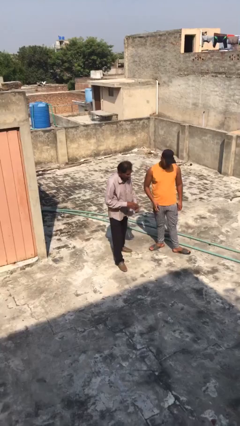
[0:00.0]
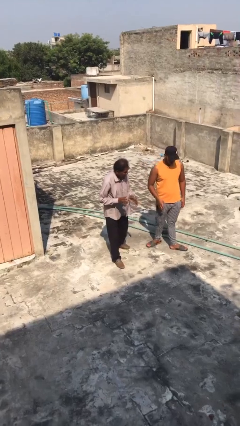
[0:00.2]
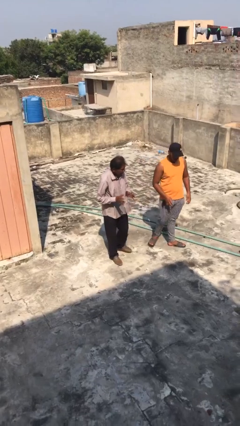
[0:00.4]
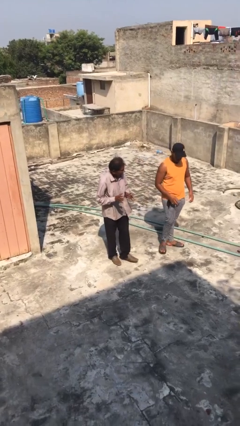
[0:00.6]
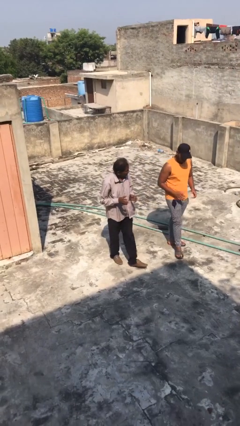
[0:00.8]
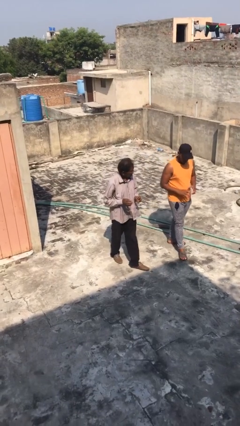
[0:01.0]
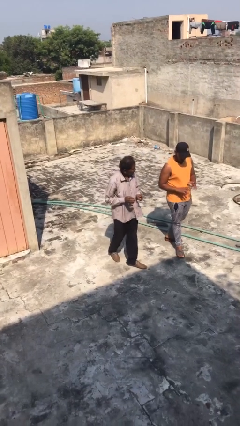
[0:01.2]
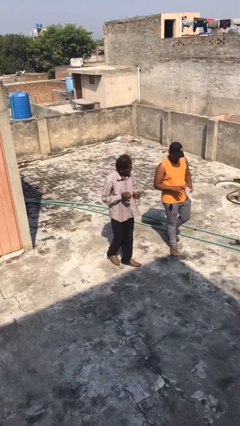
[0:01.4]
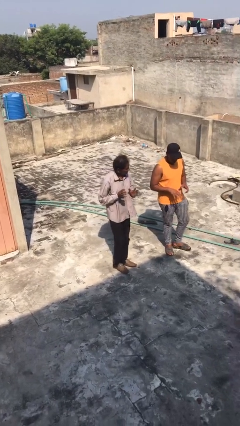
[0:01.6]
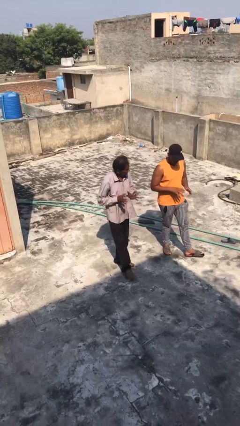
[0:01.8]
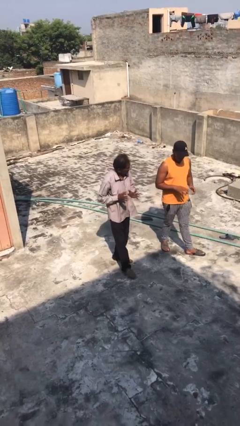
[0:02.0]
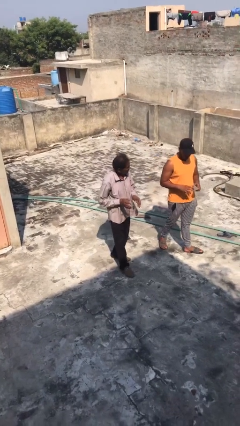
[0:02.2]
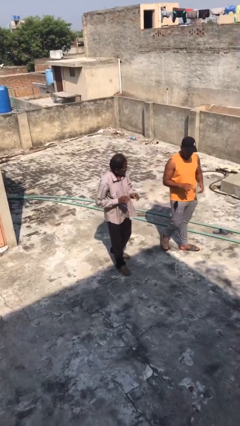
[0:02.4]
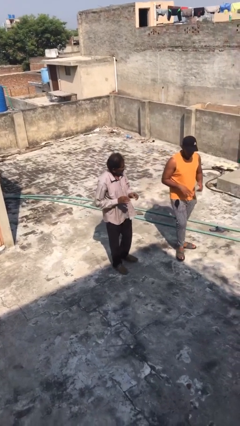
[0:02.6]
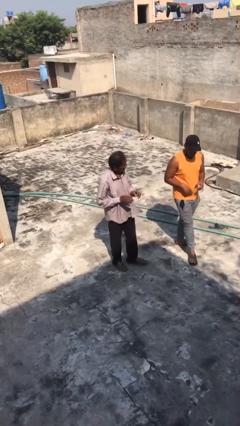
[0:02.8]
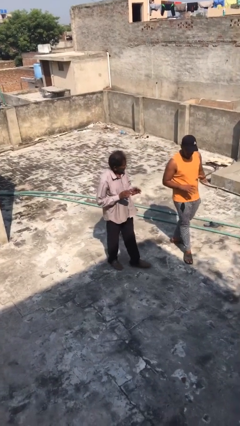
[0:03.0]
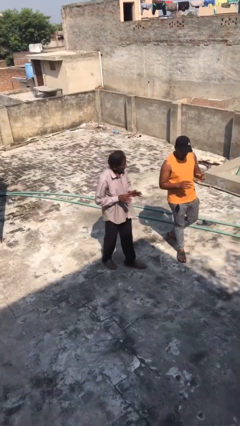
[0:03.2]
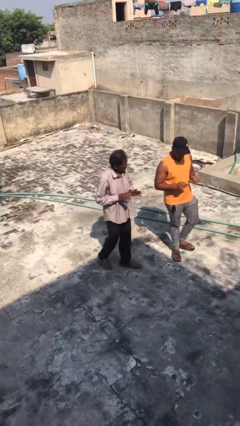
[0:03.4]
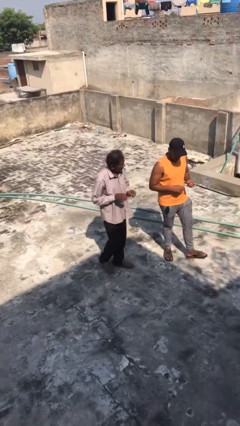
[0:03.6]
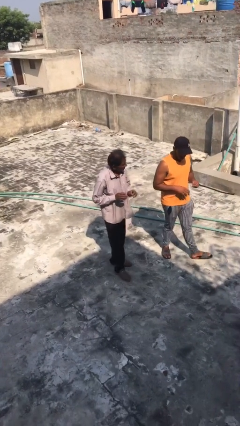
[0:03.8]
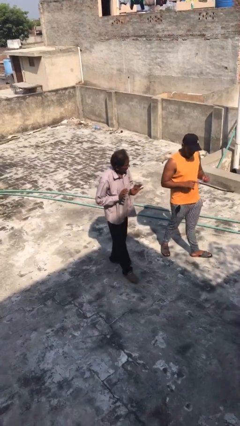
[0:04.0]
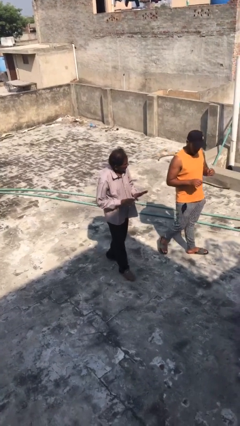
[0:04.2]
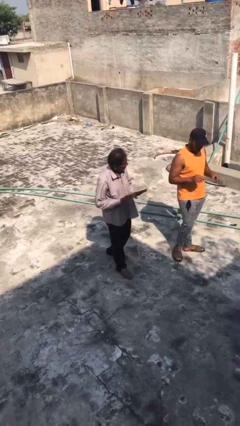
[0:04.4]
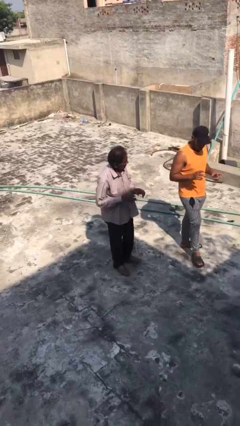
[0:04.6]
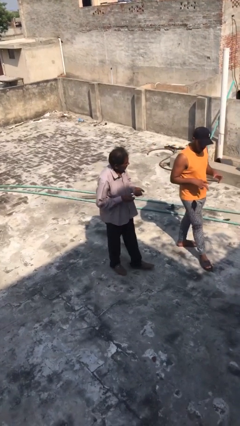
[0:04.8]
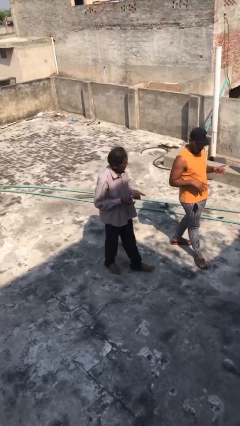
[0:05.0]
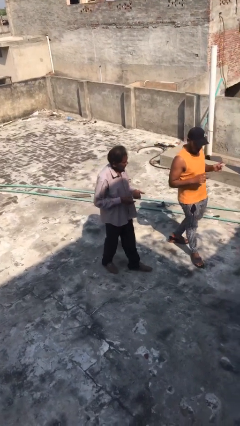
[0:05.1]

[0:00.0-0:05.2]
person talks to person

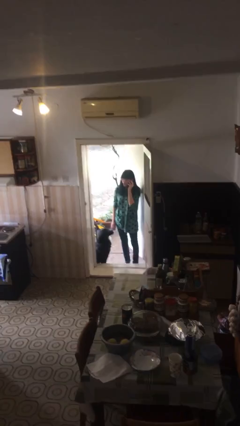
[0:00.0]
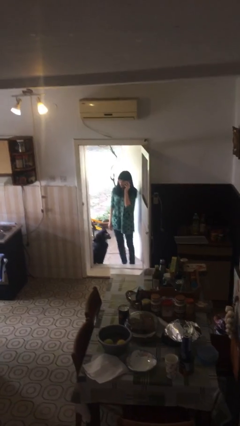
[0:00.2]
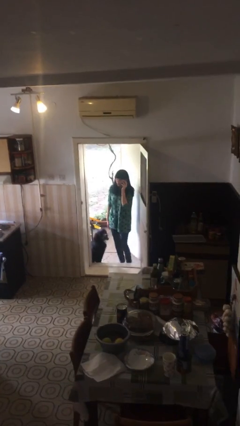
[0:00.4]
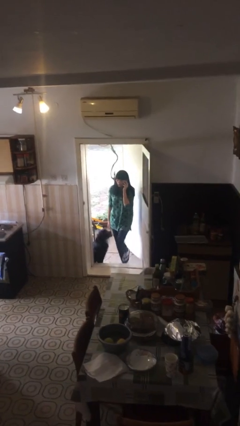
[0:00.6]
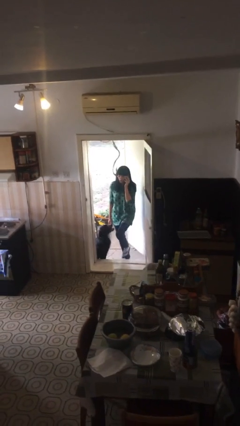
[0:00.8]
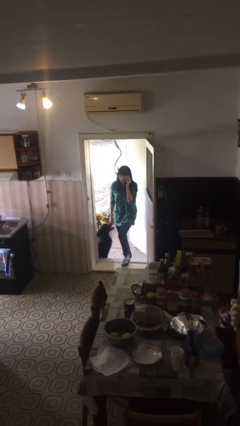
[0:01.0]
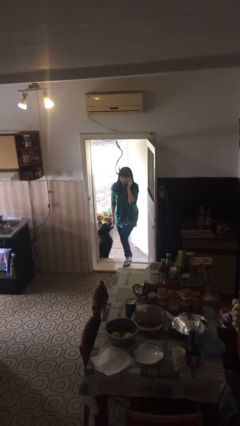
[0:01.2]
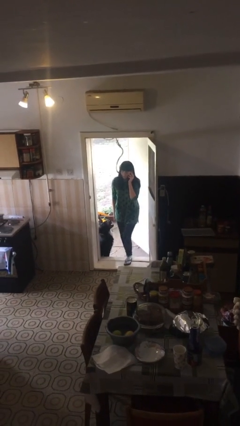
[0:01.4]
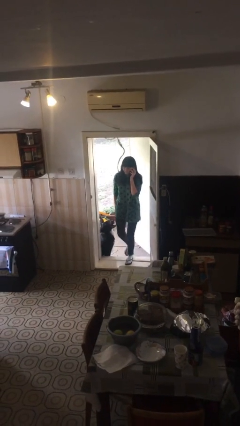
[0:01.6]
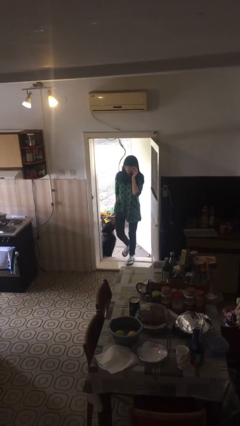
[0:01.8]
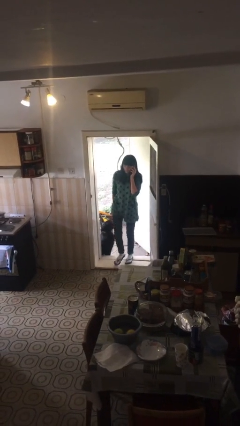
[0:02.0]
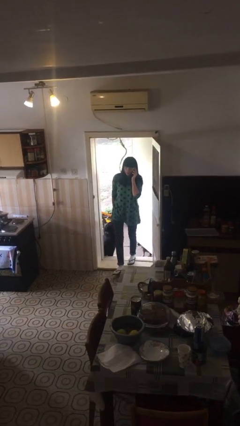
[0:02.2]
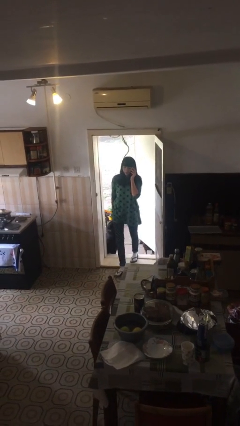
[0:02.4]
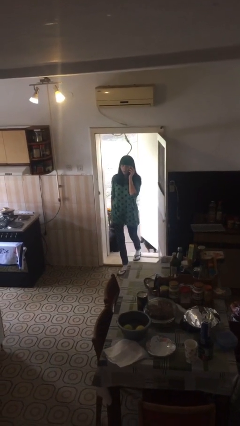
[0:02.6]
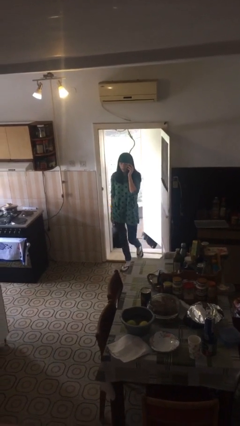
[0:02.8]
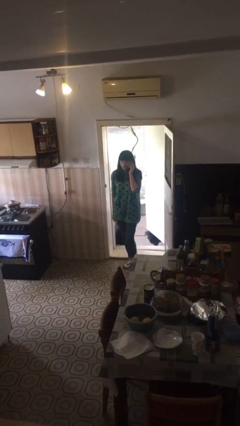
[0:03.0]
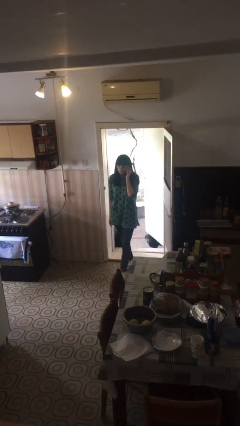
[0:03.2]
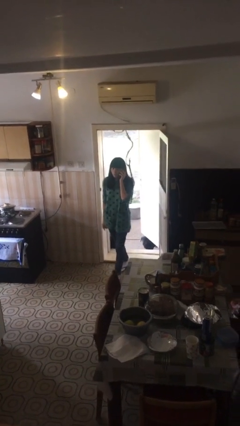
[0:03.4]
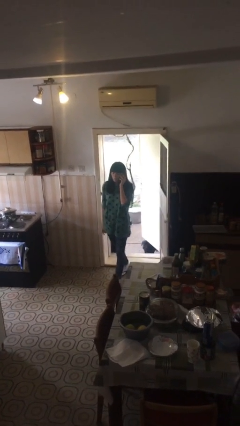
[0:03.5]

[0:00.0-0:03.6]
person enters scene through structure

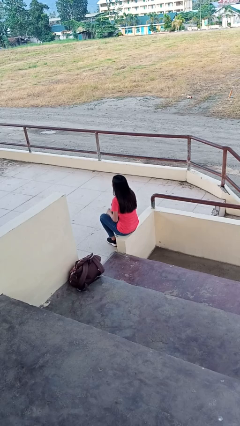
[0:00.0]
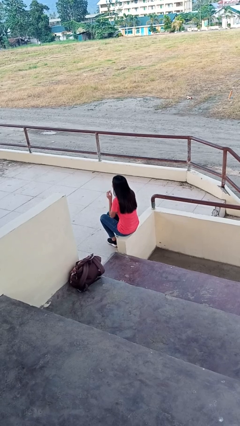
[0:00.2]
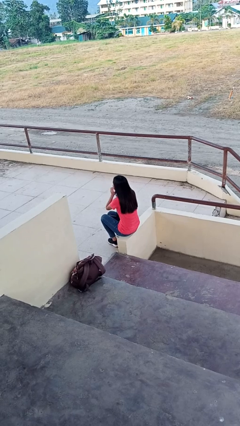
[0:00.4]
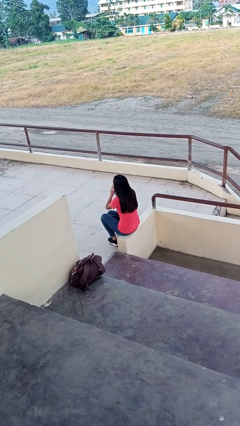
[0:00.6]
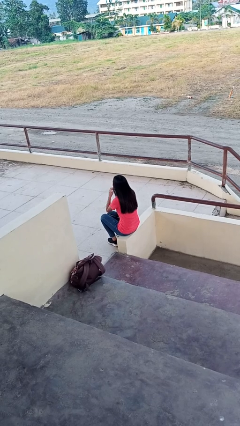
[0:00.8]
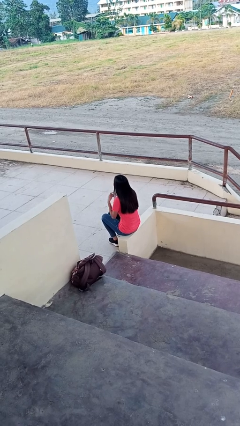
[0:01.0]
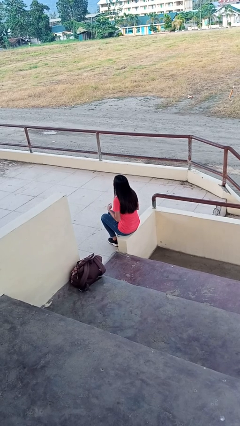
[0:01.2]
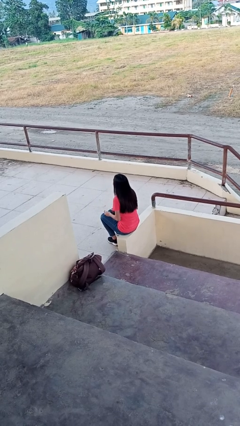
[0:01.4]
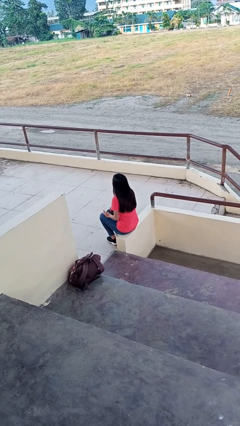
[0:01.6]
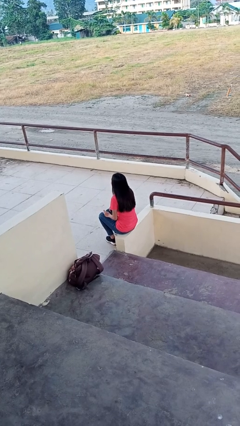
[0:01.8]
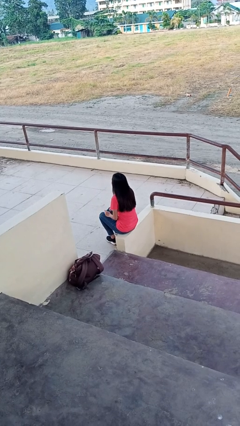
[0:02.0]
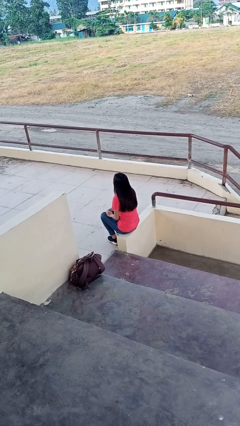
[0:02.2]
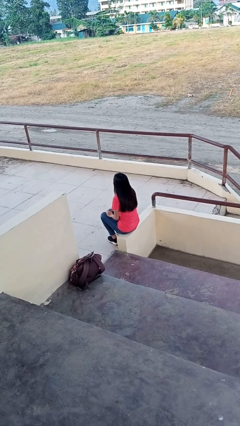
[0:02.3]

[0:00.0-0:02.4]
person takes off headphones

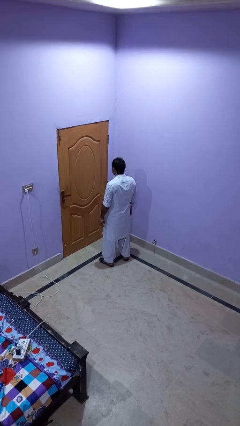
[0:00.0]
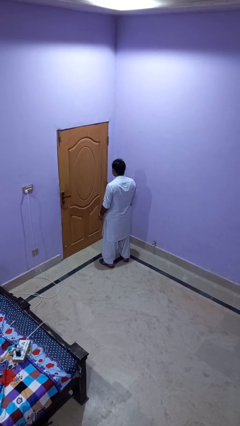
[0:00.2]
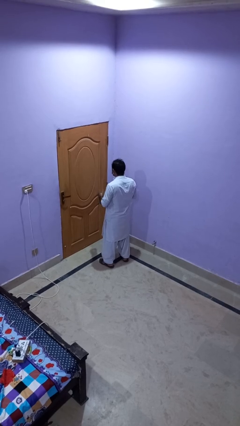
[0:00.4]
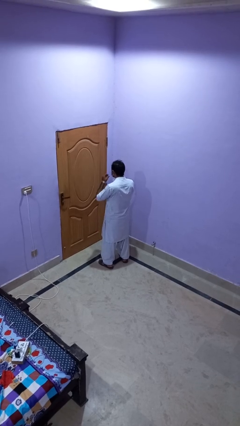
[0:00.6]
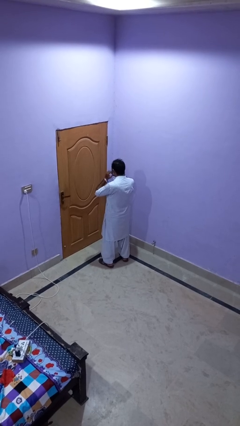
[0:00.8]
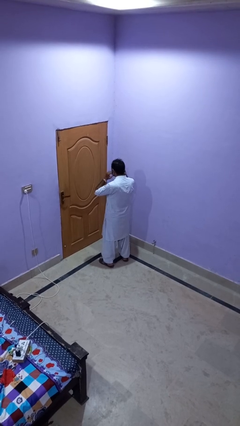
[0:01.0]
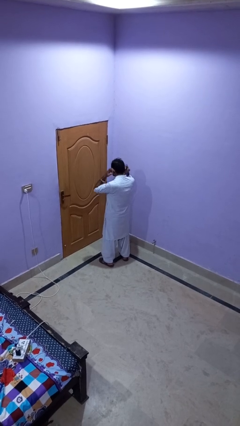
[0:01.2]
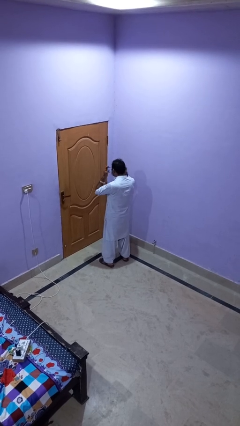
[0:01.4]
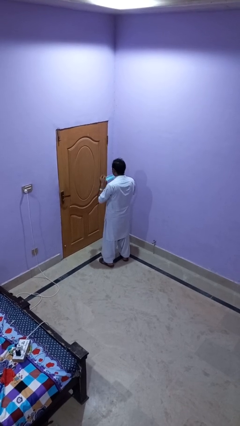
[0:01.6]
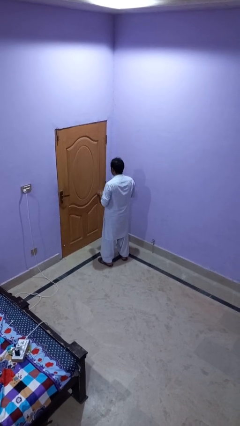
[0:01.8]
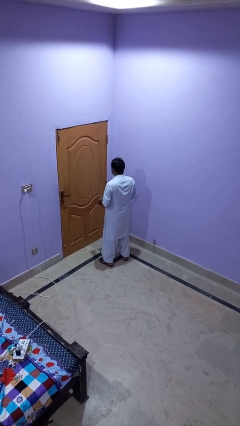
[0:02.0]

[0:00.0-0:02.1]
person takes off facemask

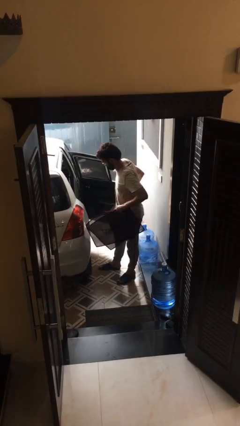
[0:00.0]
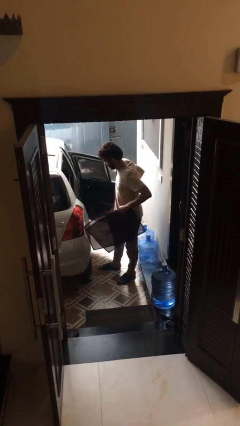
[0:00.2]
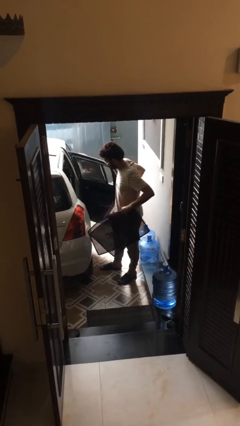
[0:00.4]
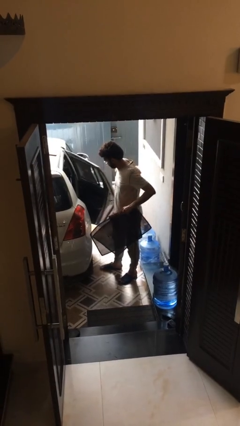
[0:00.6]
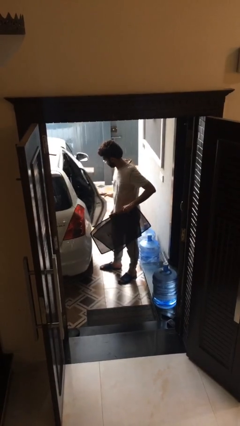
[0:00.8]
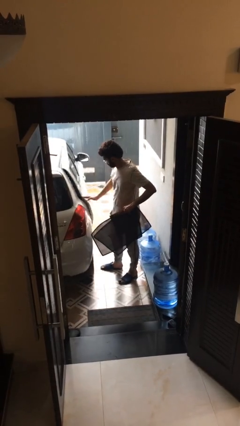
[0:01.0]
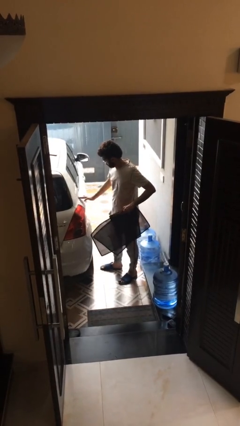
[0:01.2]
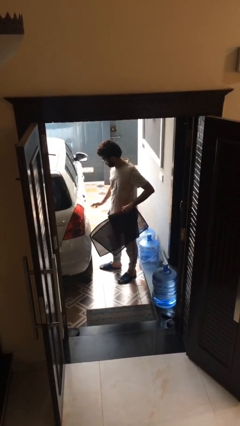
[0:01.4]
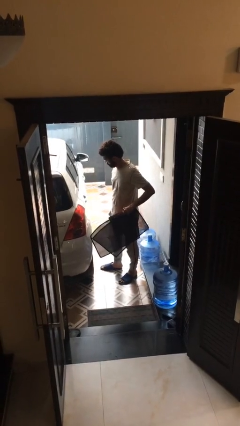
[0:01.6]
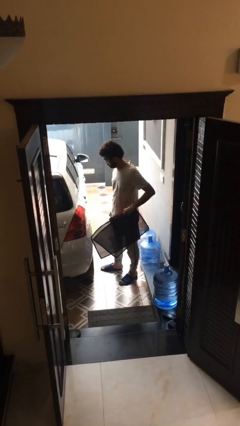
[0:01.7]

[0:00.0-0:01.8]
person closes car door

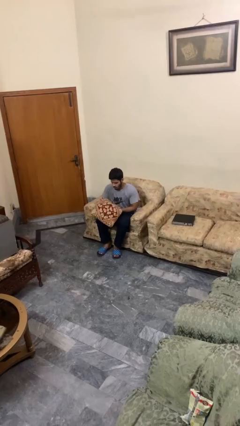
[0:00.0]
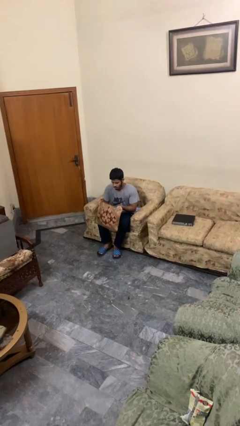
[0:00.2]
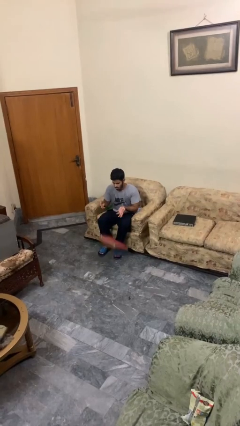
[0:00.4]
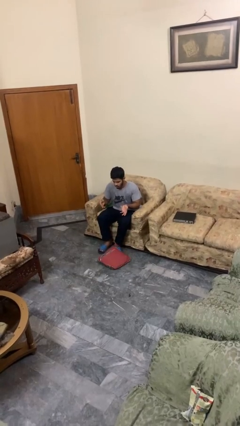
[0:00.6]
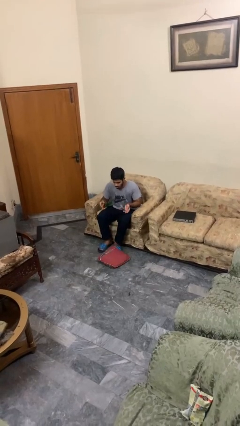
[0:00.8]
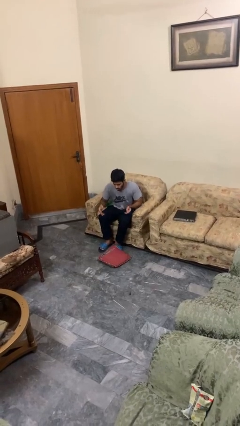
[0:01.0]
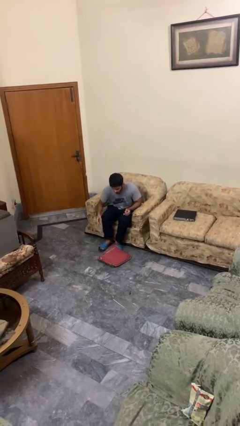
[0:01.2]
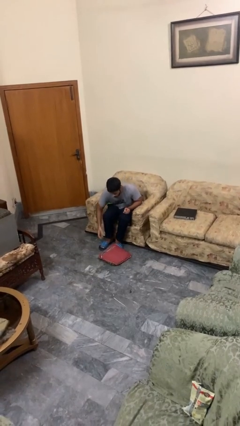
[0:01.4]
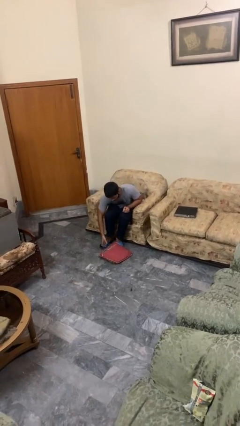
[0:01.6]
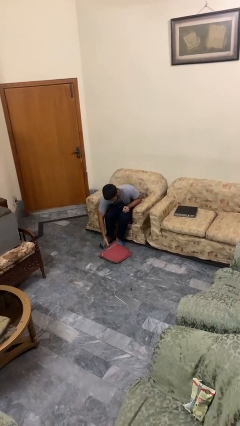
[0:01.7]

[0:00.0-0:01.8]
person drops object

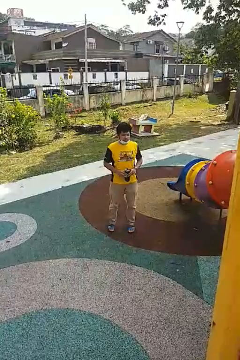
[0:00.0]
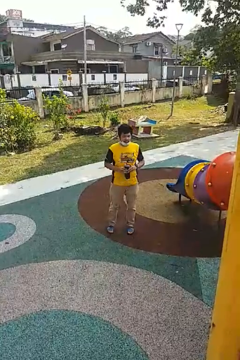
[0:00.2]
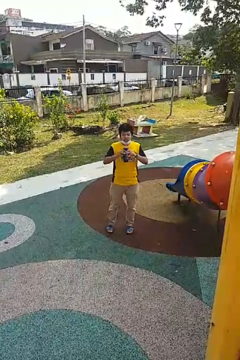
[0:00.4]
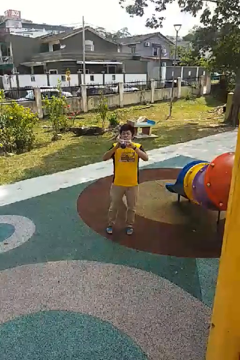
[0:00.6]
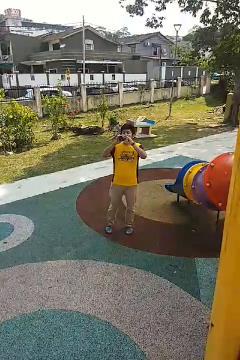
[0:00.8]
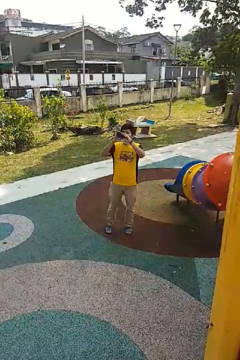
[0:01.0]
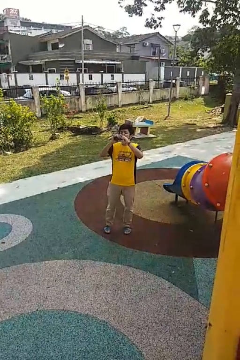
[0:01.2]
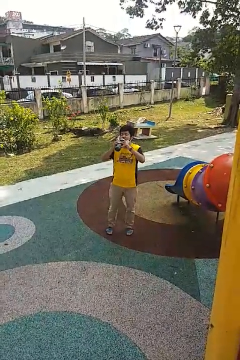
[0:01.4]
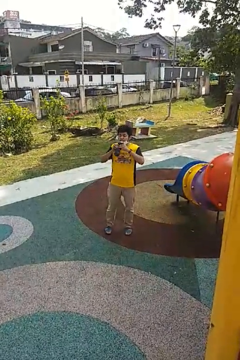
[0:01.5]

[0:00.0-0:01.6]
person drinks from bottle
